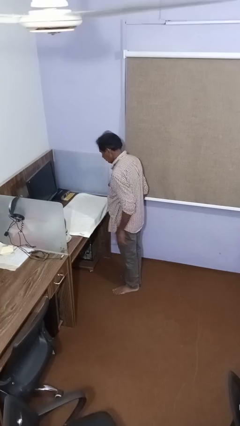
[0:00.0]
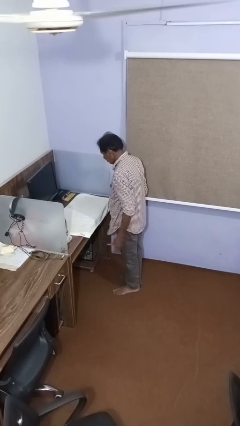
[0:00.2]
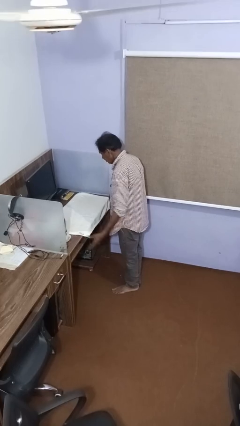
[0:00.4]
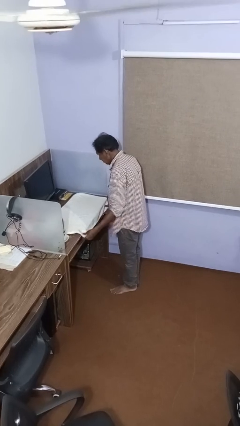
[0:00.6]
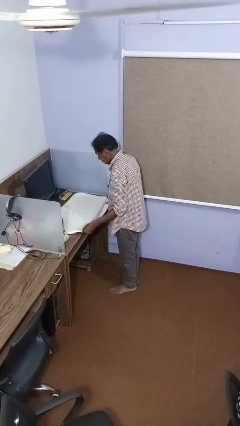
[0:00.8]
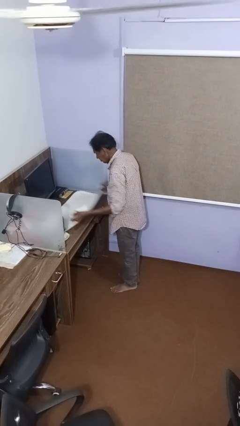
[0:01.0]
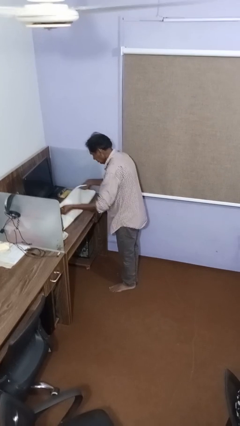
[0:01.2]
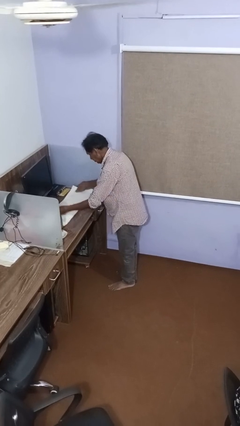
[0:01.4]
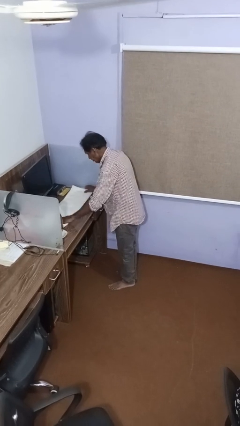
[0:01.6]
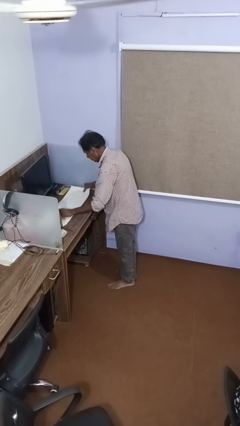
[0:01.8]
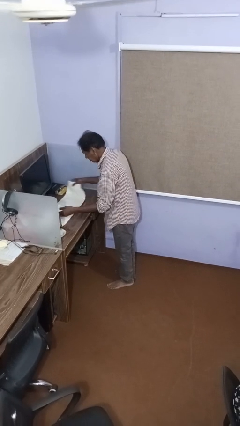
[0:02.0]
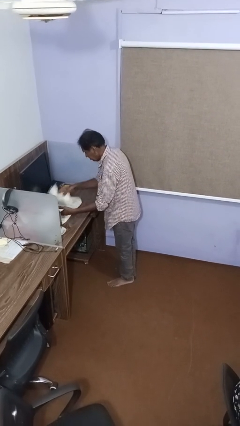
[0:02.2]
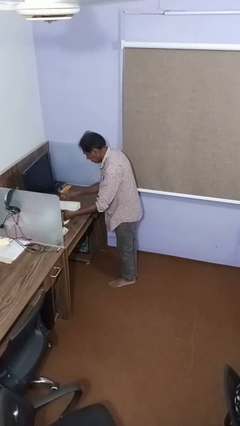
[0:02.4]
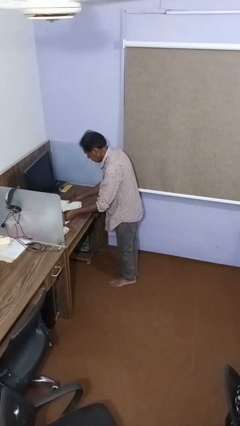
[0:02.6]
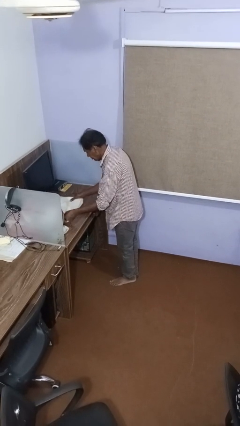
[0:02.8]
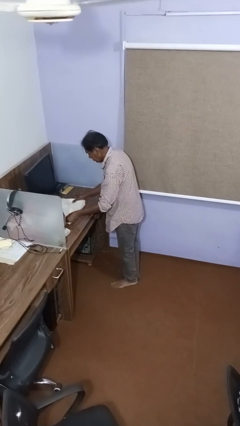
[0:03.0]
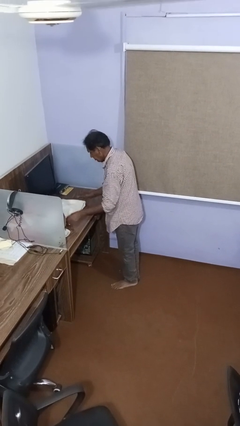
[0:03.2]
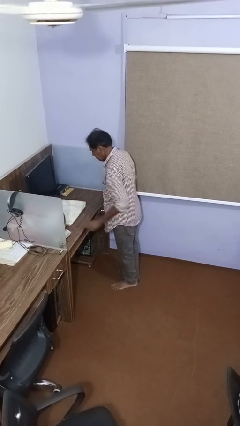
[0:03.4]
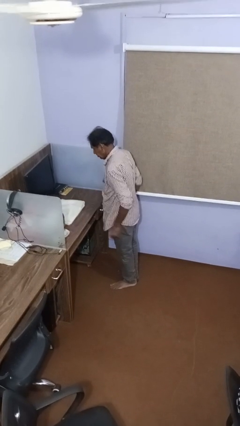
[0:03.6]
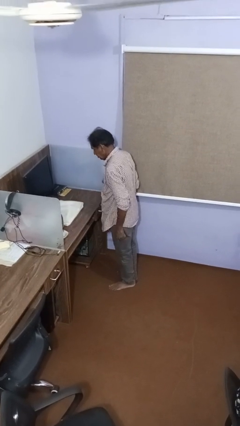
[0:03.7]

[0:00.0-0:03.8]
person folds towel

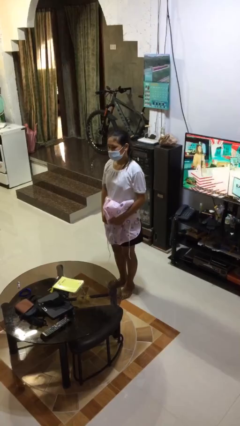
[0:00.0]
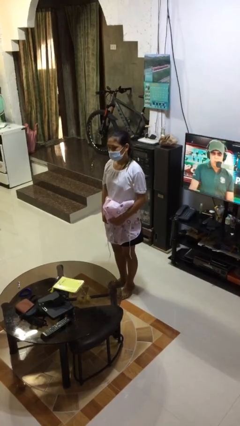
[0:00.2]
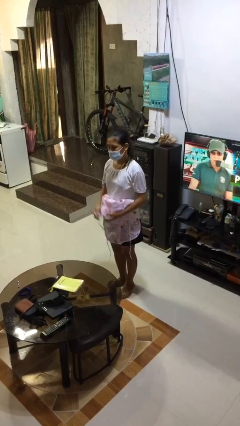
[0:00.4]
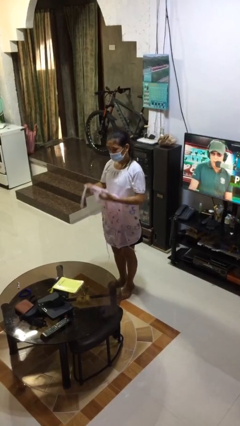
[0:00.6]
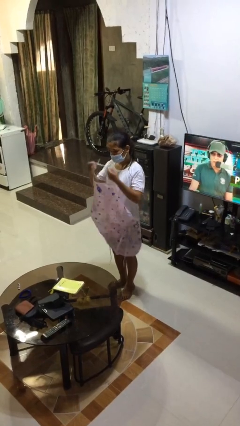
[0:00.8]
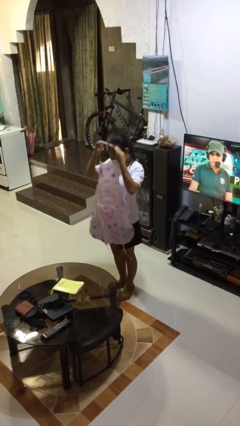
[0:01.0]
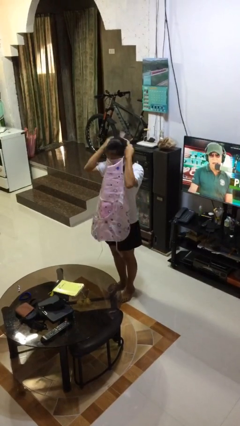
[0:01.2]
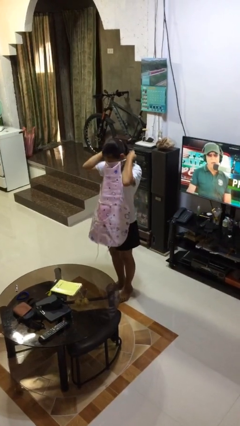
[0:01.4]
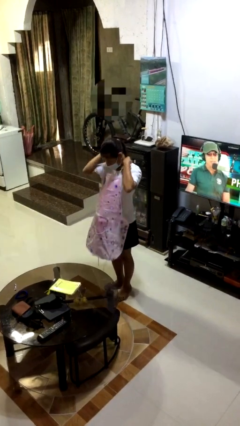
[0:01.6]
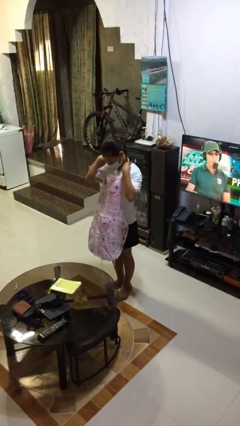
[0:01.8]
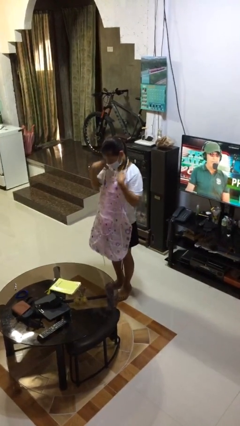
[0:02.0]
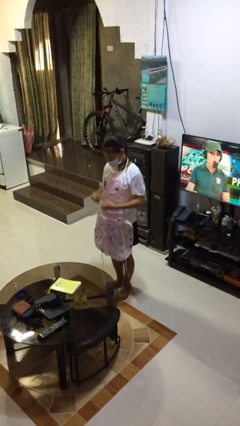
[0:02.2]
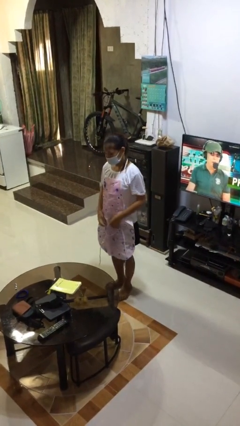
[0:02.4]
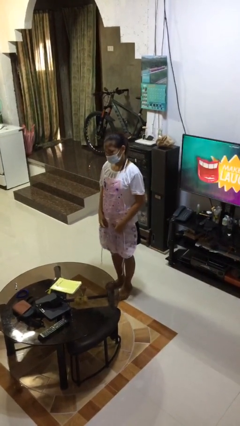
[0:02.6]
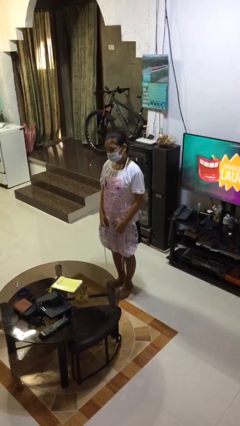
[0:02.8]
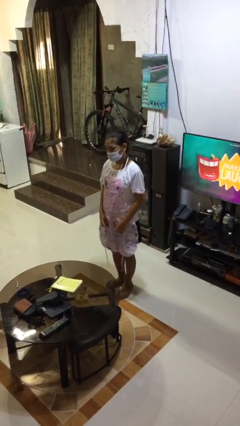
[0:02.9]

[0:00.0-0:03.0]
person puts on apron

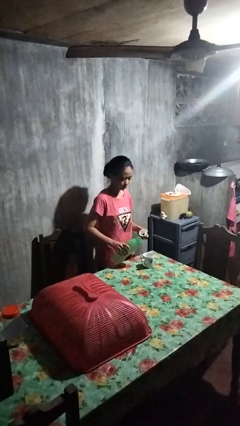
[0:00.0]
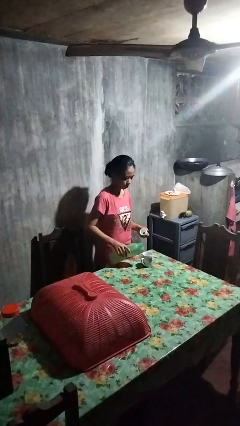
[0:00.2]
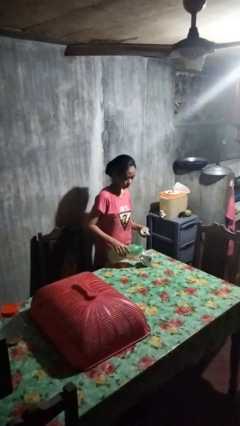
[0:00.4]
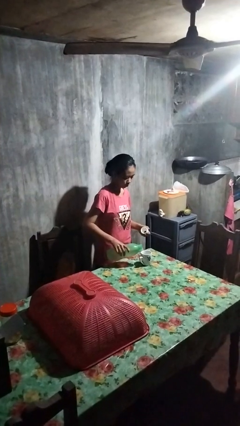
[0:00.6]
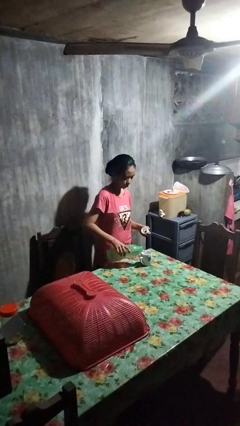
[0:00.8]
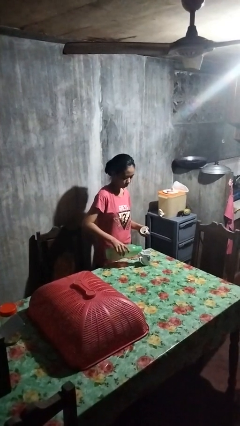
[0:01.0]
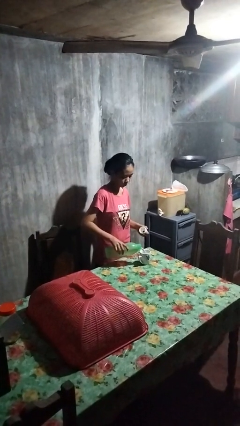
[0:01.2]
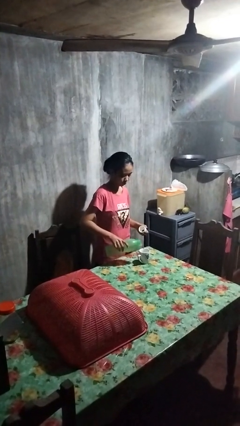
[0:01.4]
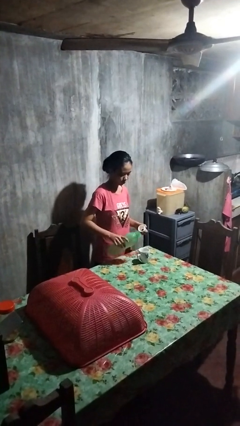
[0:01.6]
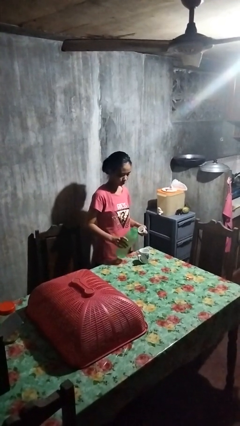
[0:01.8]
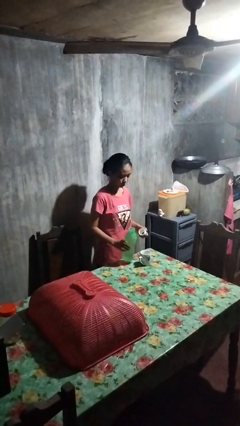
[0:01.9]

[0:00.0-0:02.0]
person pours liquid into cup

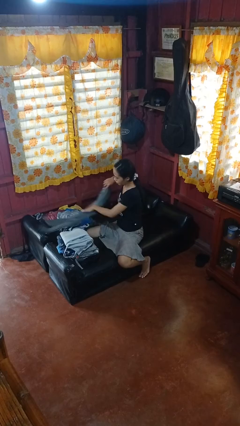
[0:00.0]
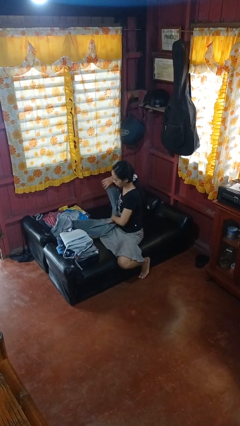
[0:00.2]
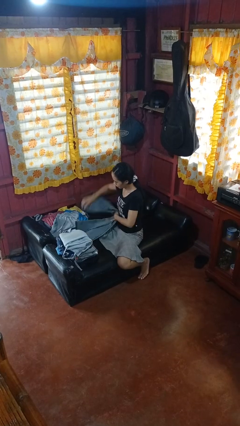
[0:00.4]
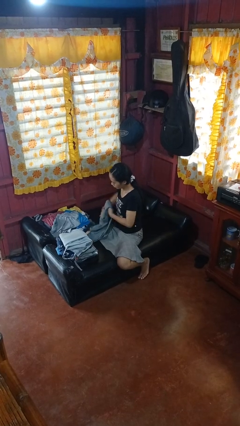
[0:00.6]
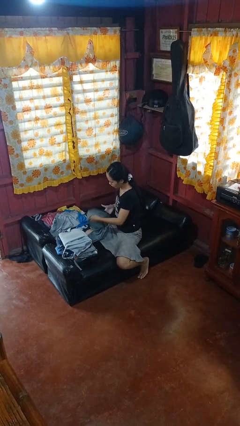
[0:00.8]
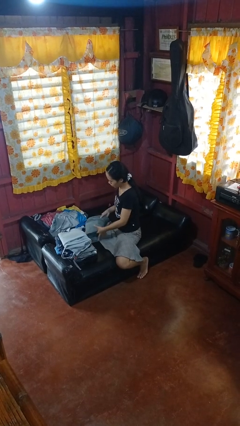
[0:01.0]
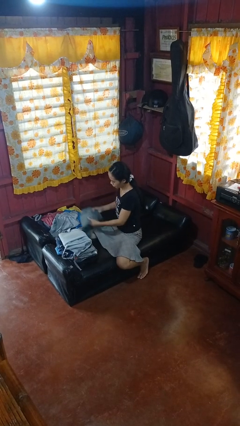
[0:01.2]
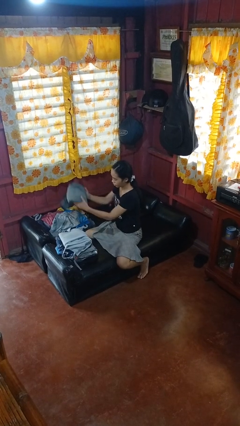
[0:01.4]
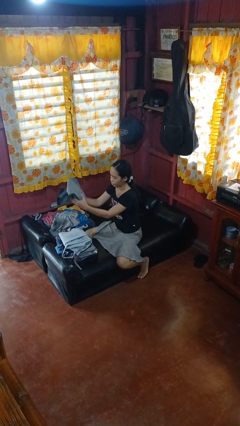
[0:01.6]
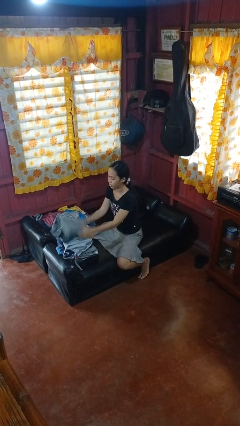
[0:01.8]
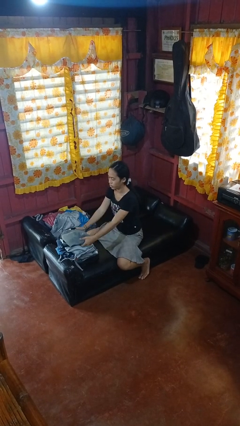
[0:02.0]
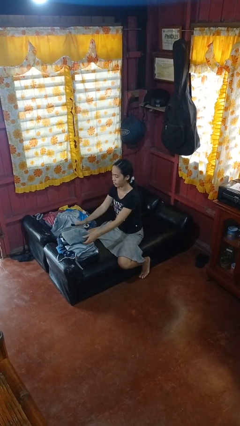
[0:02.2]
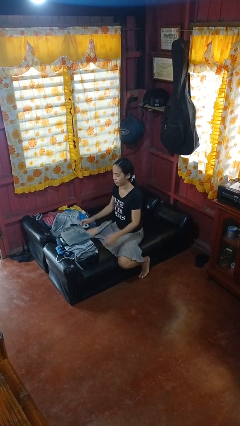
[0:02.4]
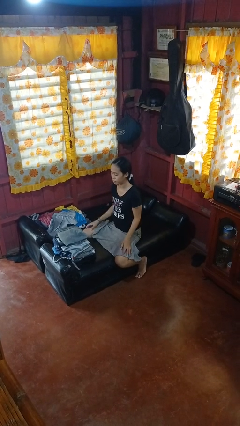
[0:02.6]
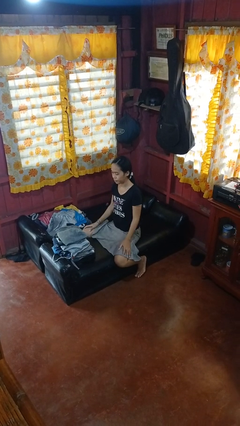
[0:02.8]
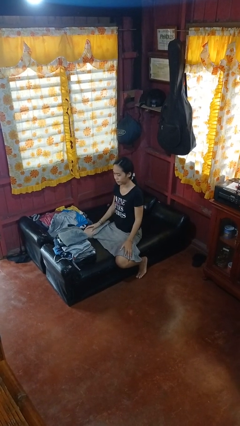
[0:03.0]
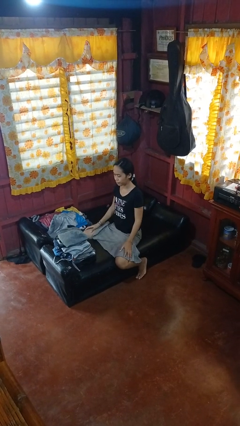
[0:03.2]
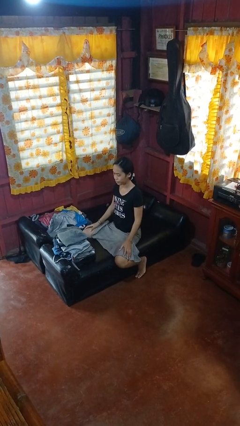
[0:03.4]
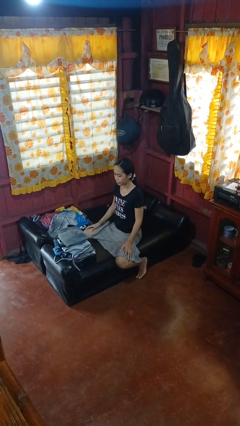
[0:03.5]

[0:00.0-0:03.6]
person folds pants

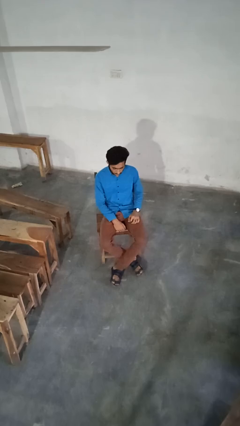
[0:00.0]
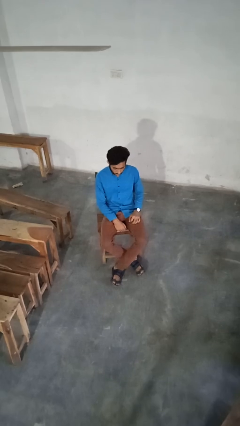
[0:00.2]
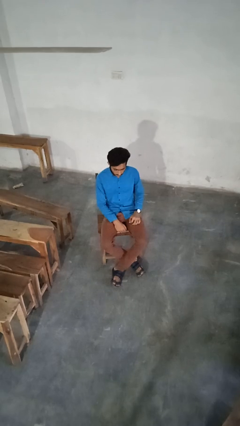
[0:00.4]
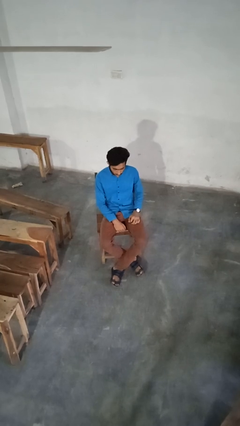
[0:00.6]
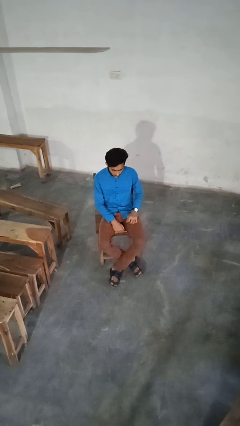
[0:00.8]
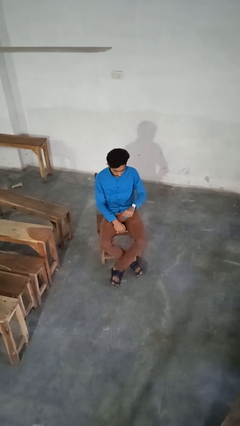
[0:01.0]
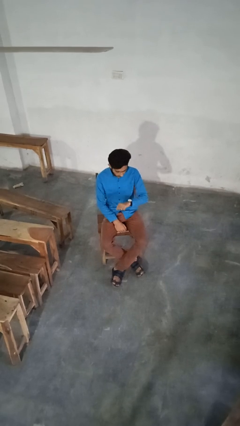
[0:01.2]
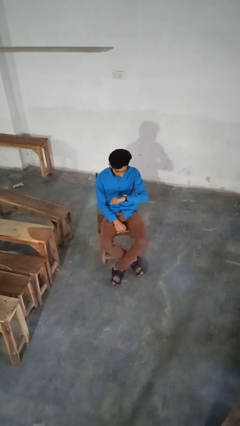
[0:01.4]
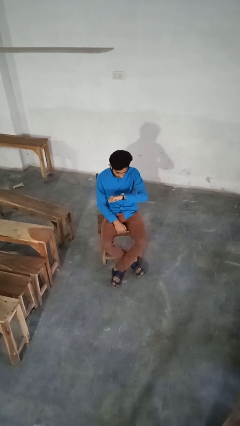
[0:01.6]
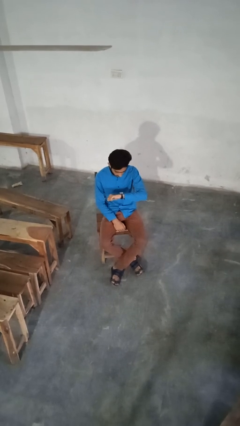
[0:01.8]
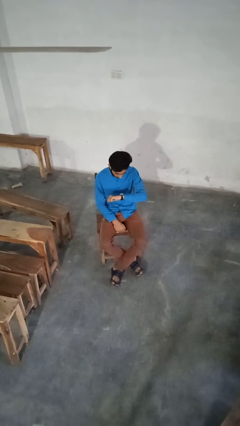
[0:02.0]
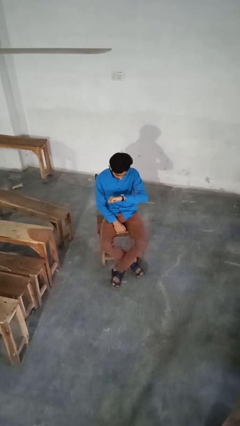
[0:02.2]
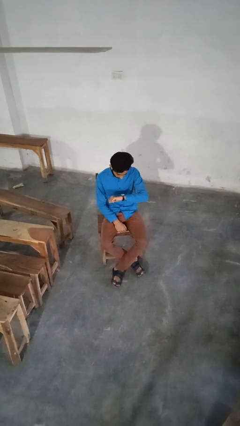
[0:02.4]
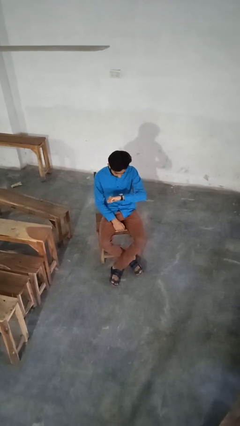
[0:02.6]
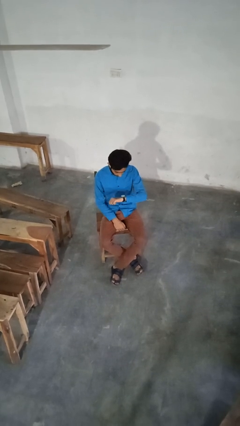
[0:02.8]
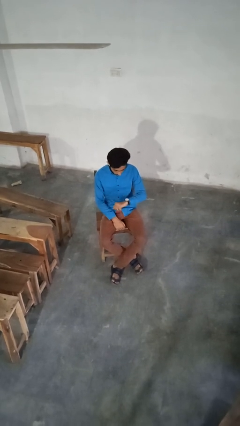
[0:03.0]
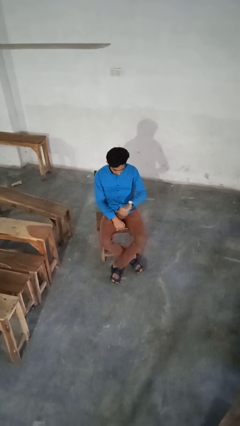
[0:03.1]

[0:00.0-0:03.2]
person looks at wristwatch

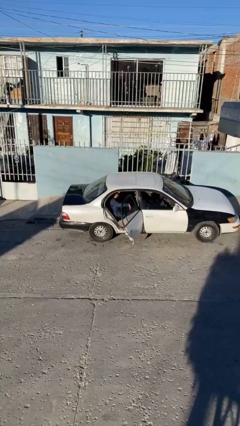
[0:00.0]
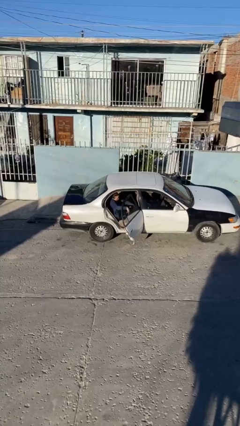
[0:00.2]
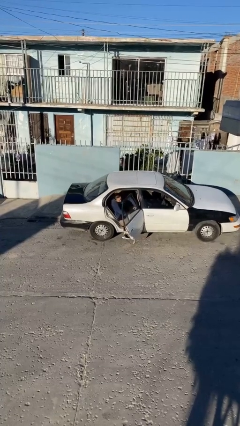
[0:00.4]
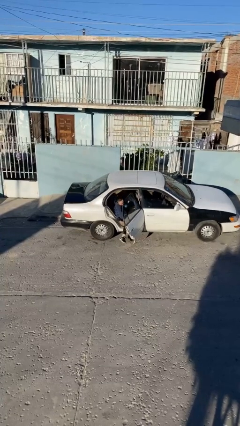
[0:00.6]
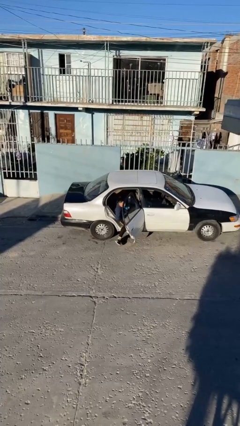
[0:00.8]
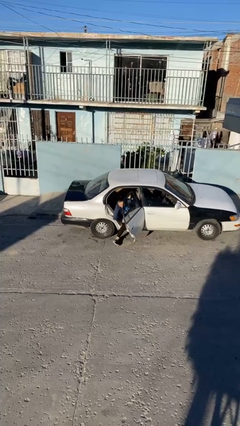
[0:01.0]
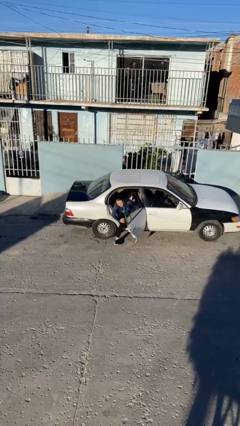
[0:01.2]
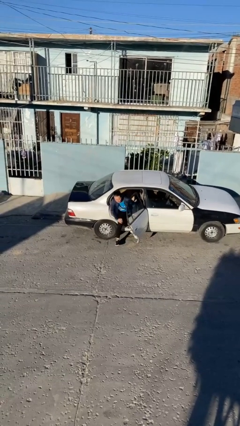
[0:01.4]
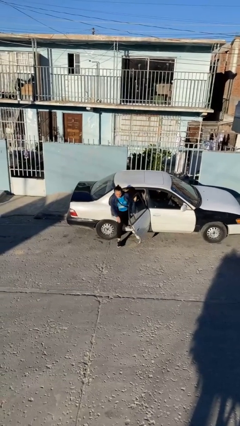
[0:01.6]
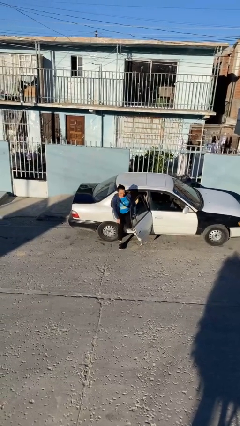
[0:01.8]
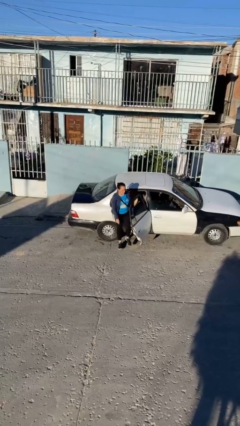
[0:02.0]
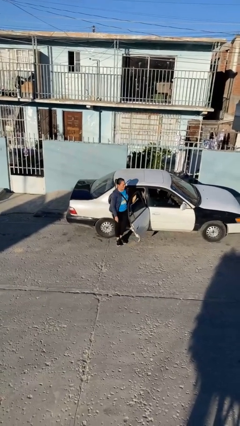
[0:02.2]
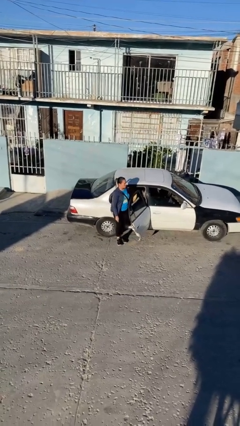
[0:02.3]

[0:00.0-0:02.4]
person exits car
